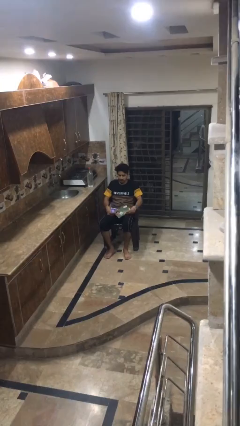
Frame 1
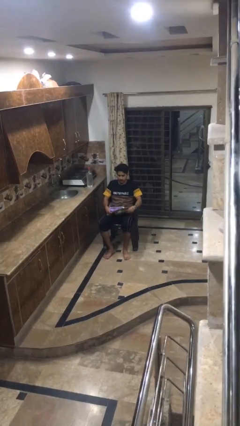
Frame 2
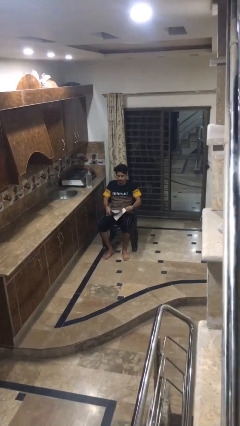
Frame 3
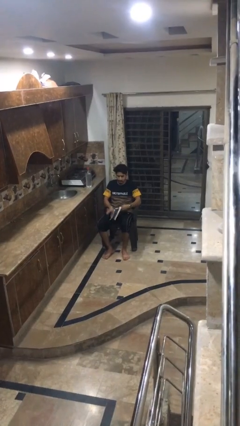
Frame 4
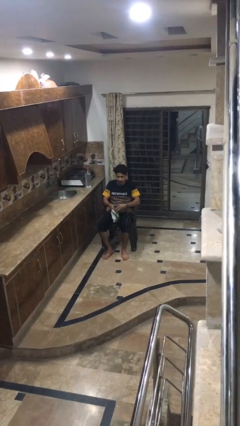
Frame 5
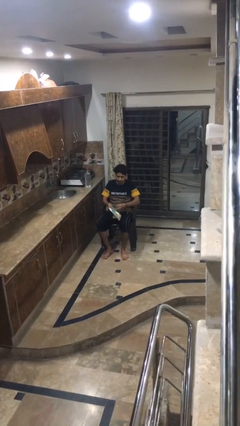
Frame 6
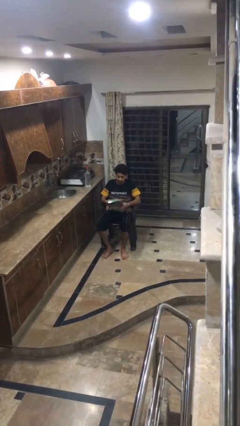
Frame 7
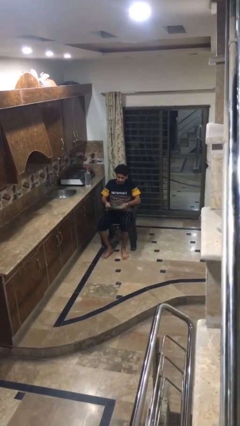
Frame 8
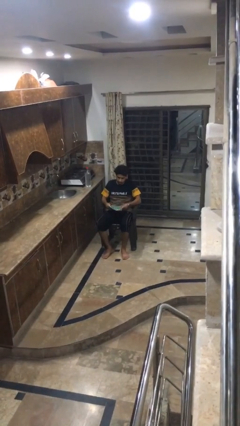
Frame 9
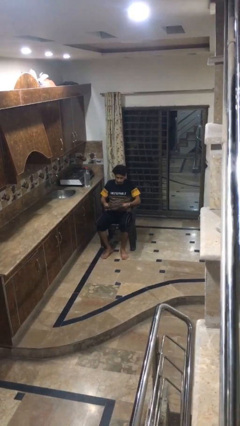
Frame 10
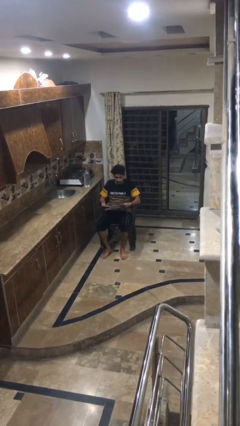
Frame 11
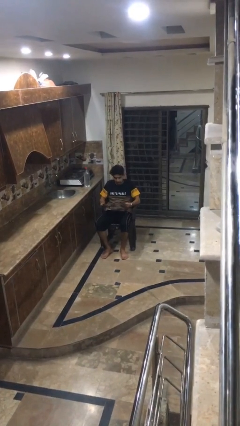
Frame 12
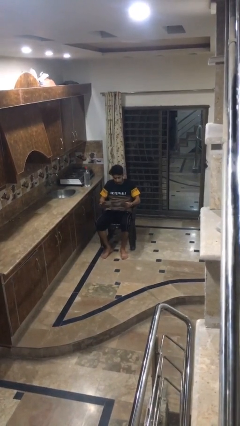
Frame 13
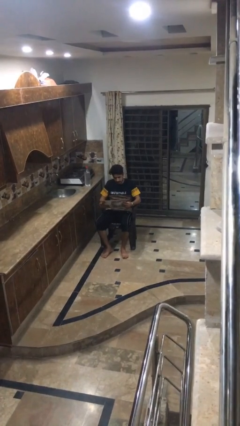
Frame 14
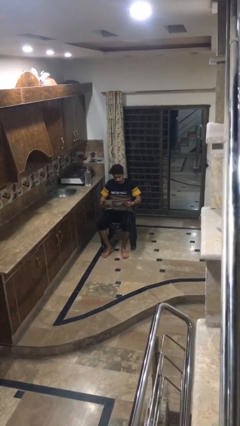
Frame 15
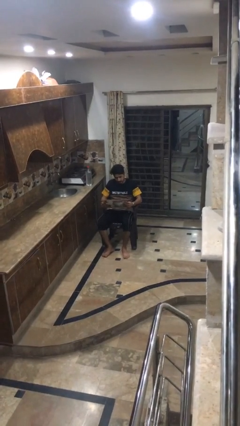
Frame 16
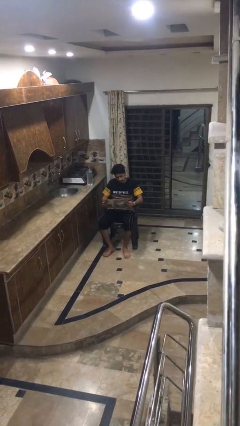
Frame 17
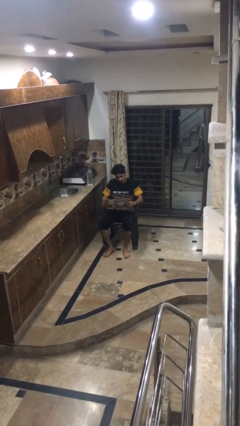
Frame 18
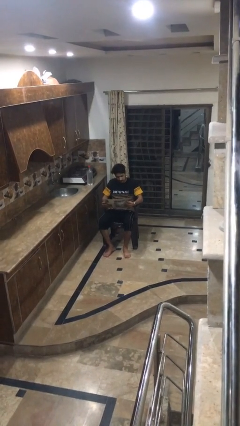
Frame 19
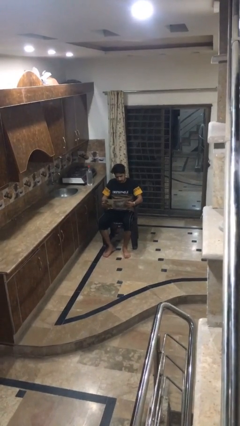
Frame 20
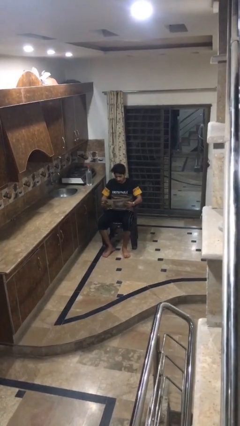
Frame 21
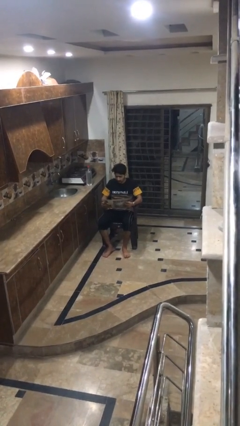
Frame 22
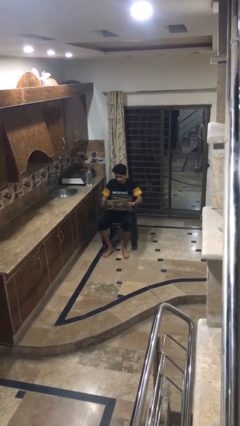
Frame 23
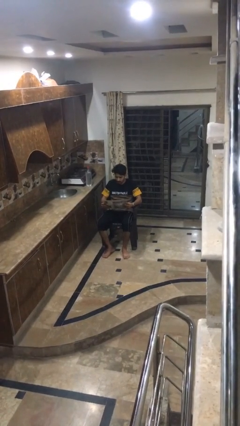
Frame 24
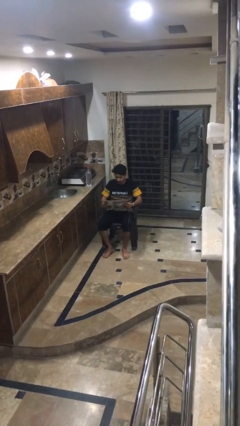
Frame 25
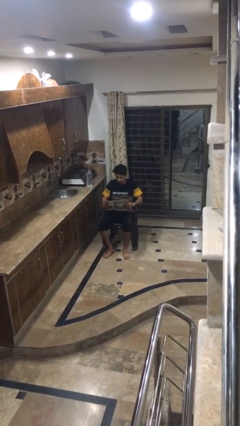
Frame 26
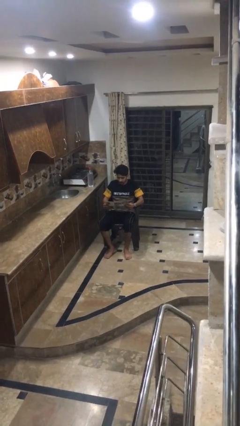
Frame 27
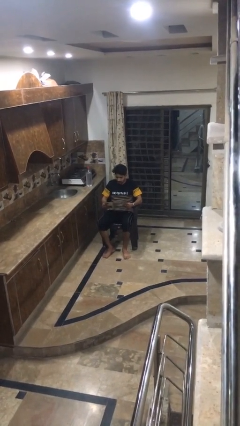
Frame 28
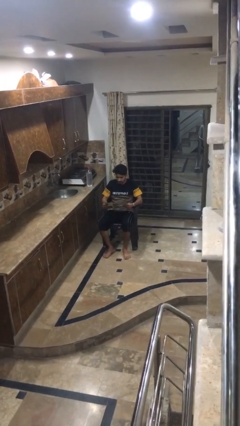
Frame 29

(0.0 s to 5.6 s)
person reads newspaper

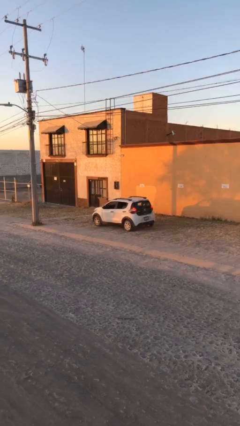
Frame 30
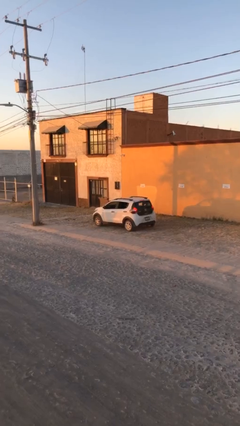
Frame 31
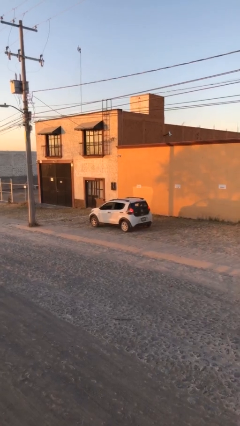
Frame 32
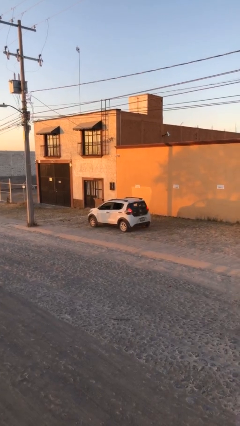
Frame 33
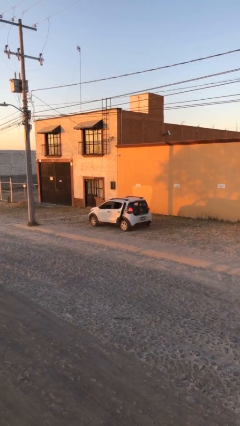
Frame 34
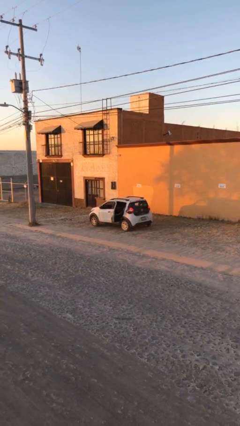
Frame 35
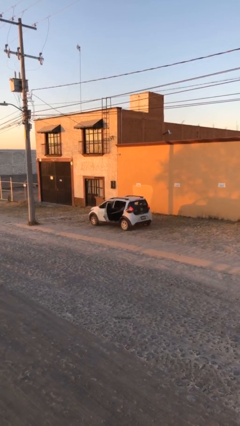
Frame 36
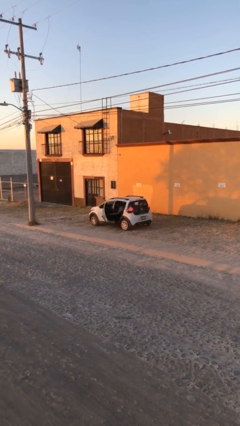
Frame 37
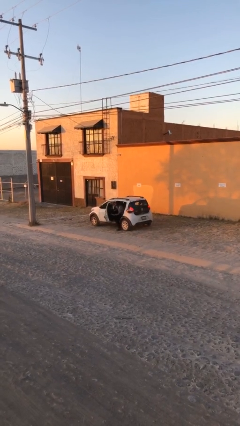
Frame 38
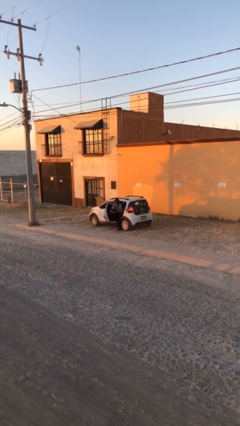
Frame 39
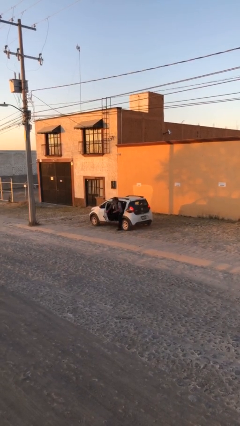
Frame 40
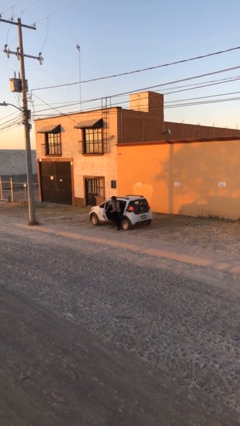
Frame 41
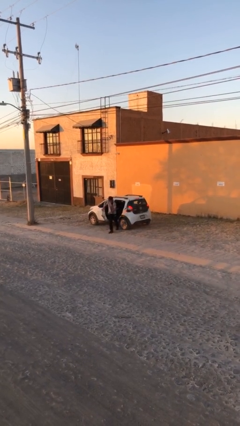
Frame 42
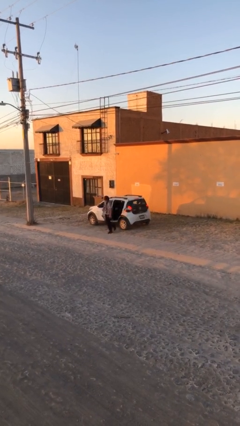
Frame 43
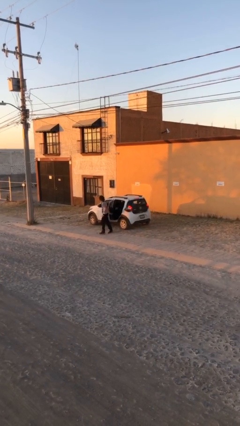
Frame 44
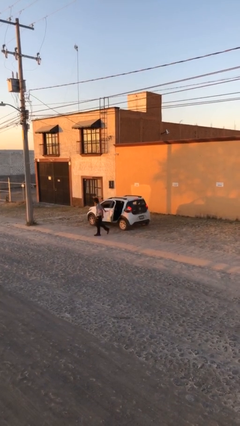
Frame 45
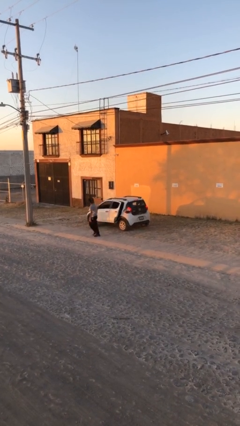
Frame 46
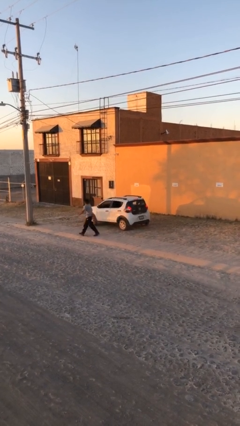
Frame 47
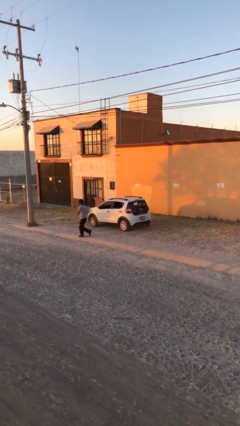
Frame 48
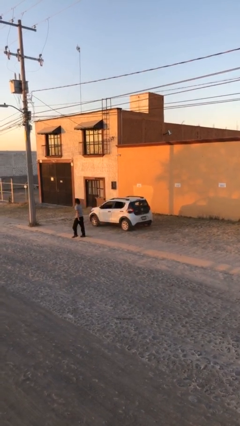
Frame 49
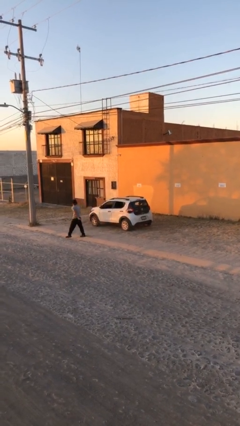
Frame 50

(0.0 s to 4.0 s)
car drops off person

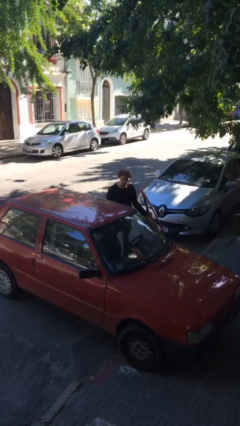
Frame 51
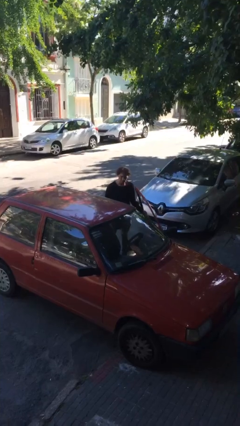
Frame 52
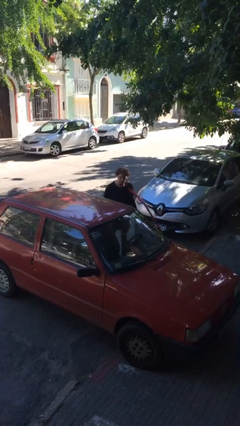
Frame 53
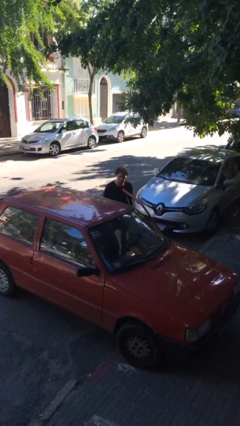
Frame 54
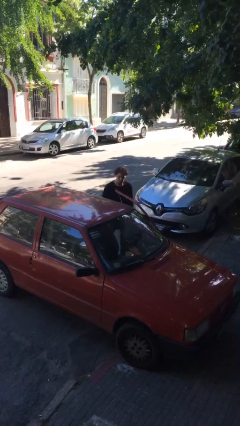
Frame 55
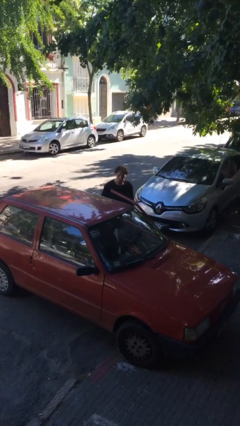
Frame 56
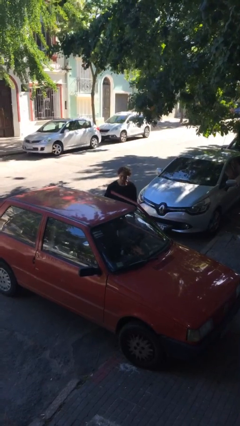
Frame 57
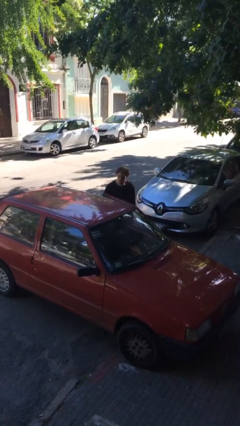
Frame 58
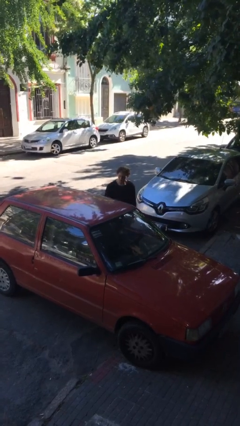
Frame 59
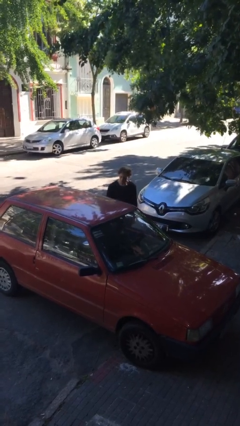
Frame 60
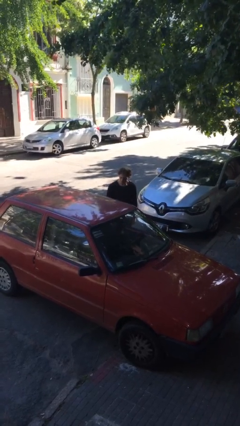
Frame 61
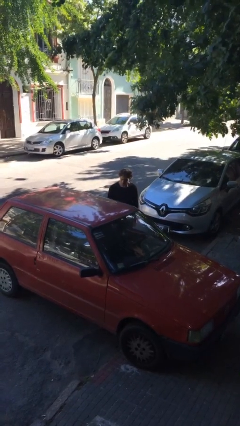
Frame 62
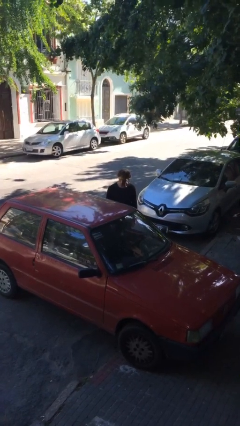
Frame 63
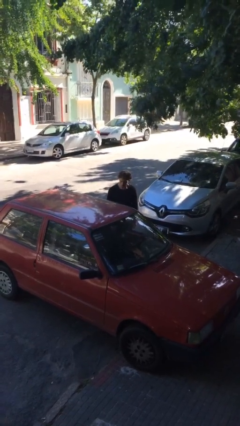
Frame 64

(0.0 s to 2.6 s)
person closes car door

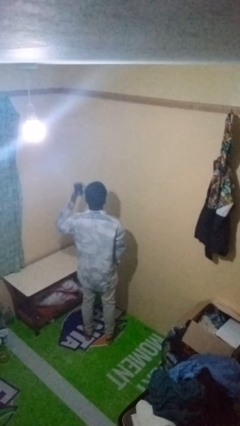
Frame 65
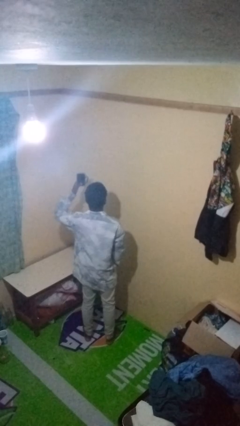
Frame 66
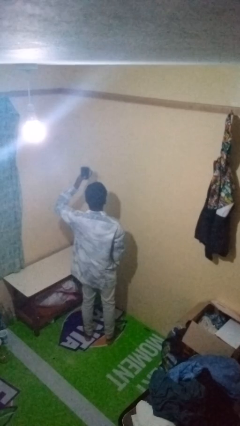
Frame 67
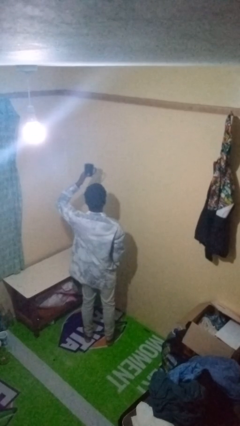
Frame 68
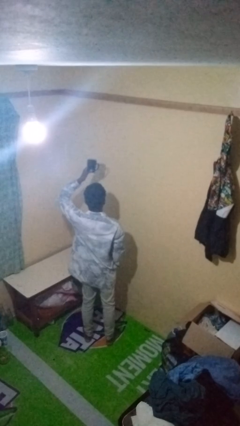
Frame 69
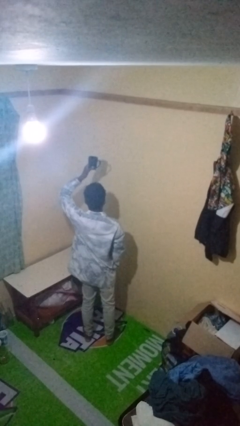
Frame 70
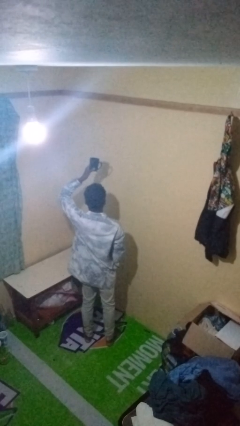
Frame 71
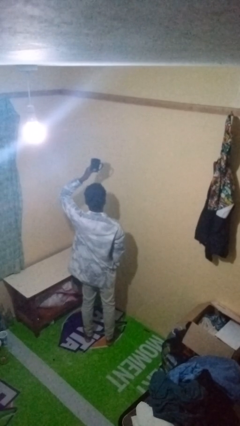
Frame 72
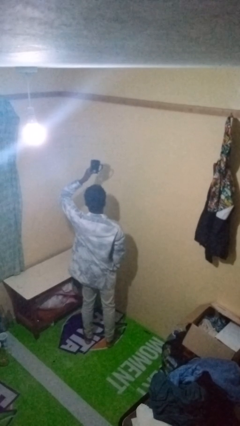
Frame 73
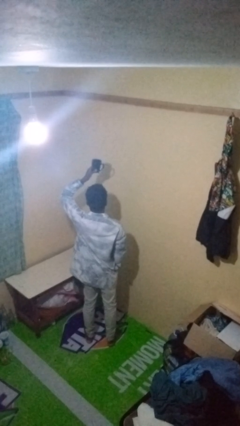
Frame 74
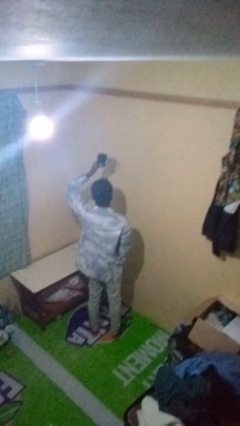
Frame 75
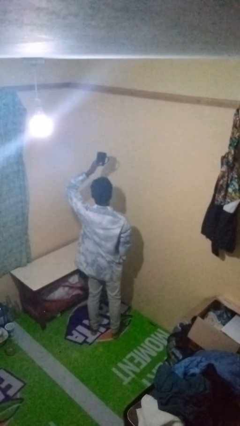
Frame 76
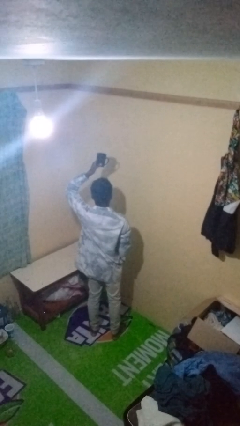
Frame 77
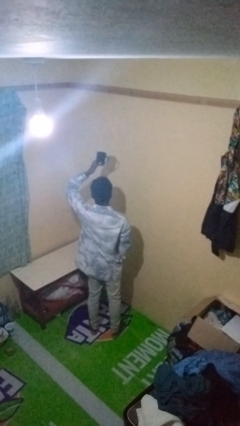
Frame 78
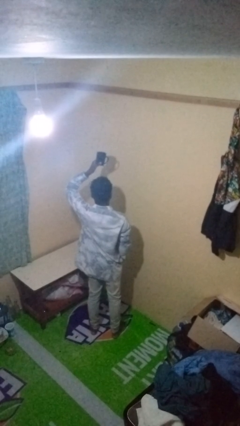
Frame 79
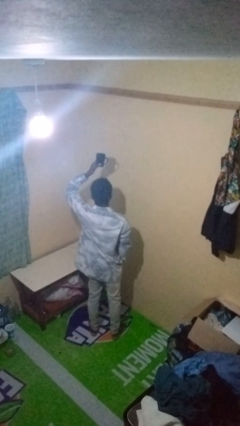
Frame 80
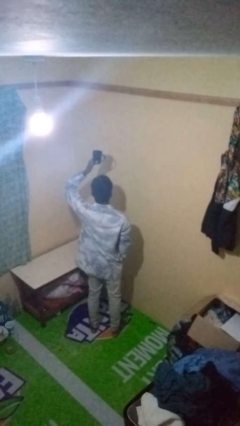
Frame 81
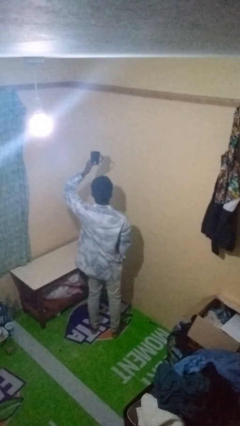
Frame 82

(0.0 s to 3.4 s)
person holds object above head

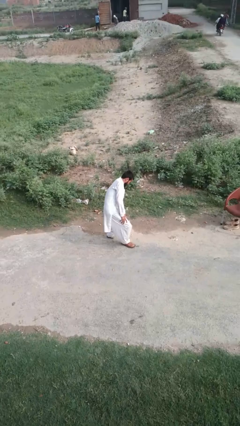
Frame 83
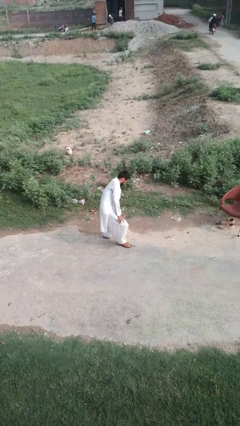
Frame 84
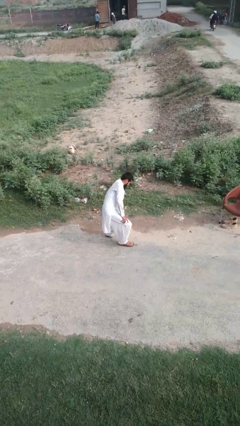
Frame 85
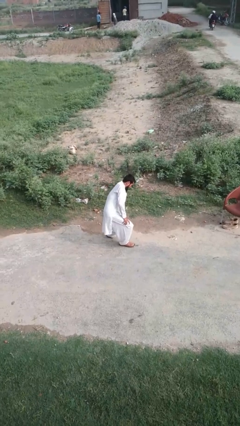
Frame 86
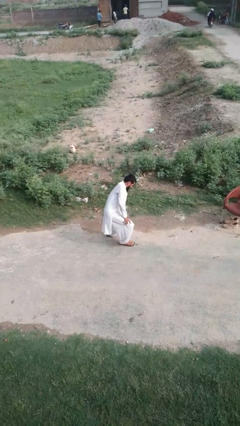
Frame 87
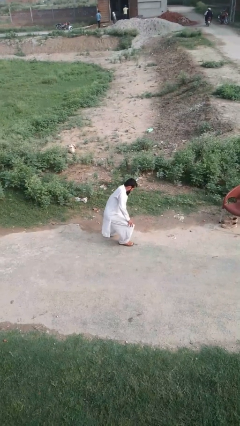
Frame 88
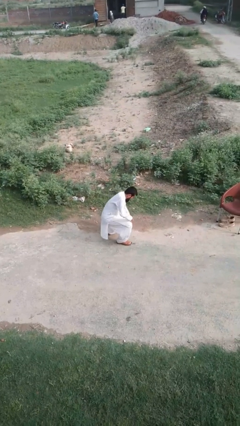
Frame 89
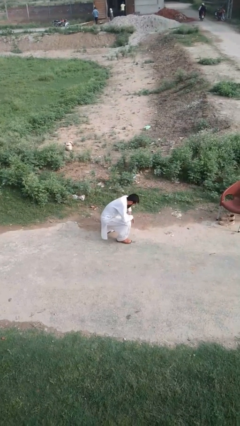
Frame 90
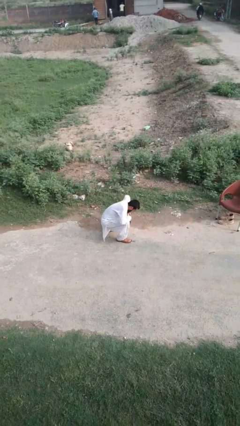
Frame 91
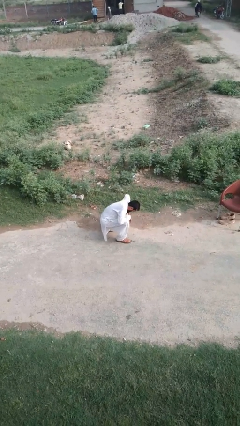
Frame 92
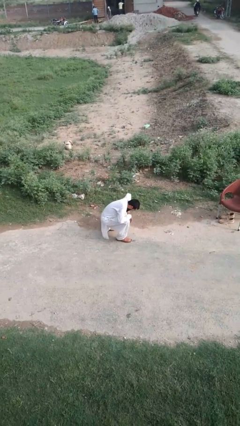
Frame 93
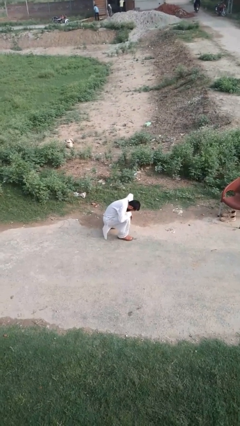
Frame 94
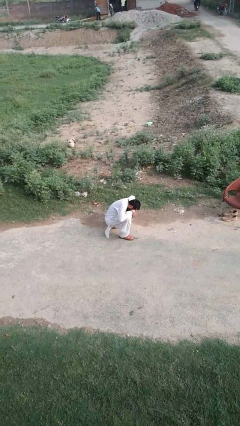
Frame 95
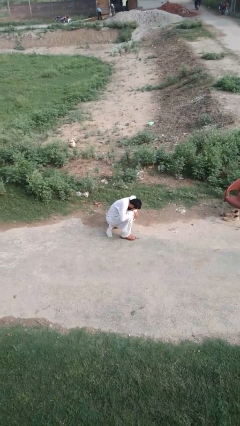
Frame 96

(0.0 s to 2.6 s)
person lies down on floor
